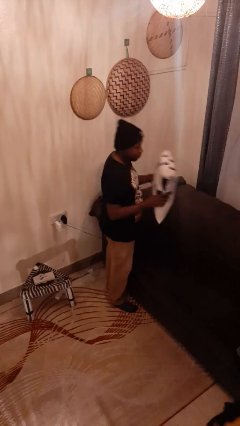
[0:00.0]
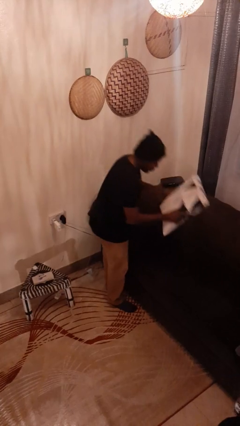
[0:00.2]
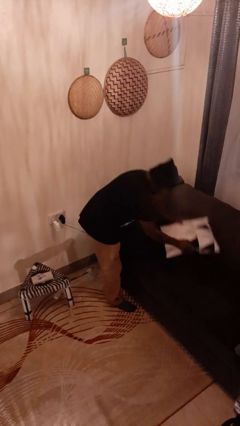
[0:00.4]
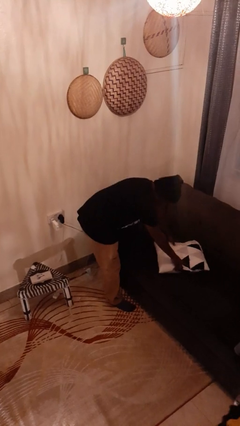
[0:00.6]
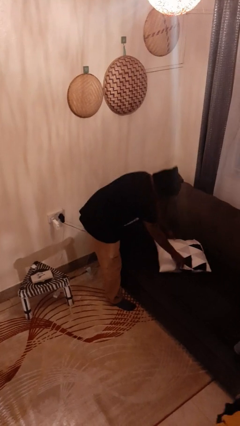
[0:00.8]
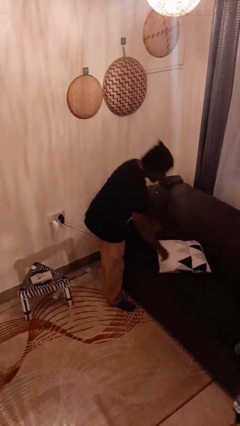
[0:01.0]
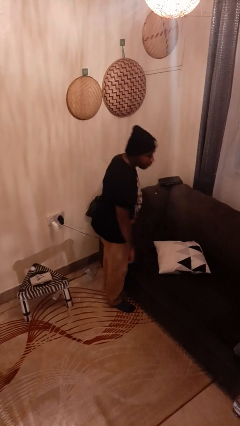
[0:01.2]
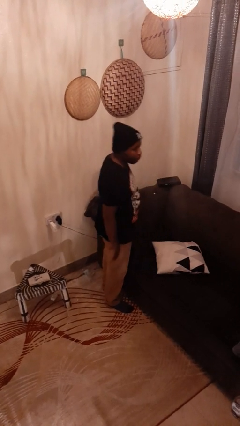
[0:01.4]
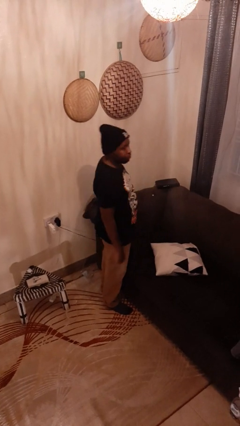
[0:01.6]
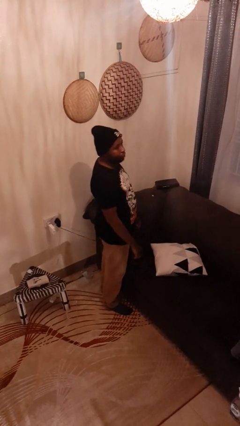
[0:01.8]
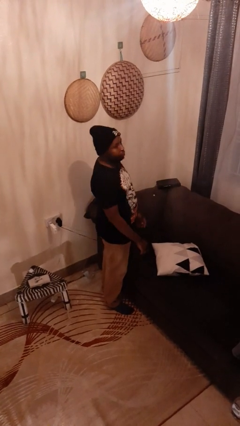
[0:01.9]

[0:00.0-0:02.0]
person puts down object on couch

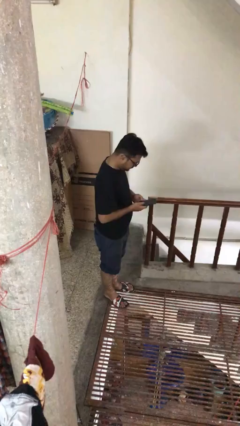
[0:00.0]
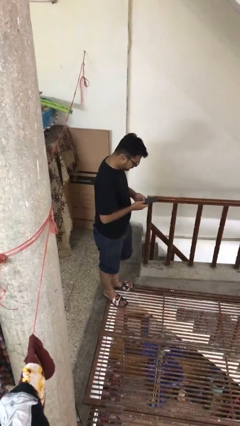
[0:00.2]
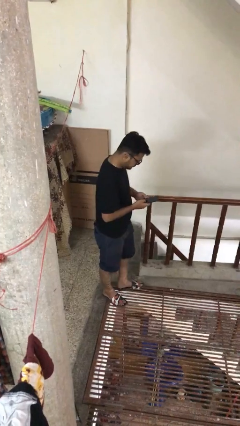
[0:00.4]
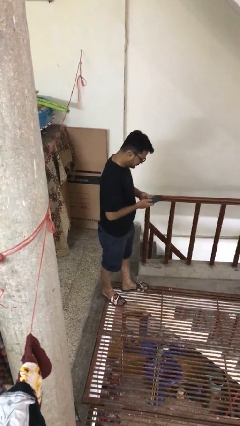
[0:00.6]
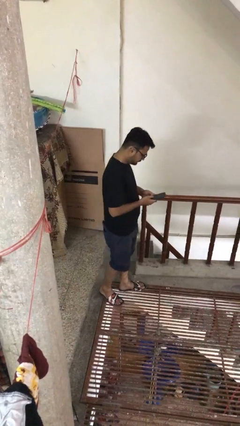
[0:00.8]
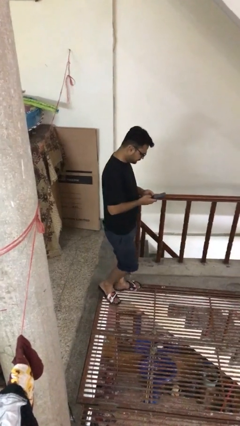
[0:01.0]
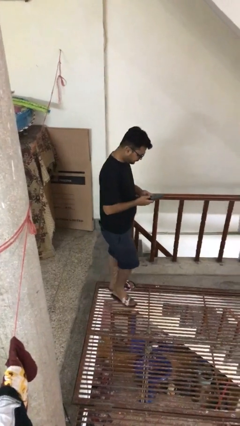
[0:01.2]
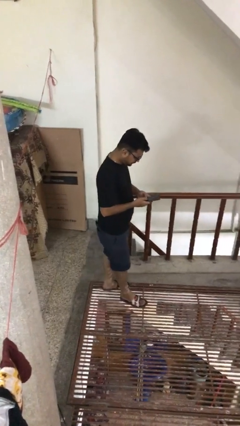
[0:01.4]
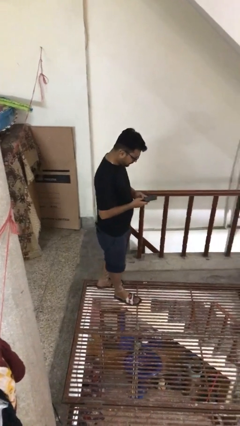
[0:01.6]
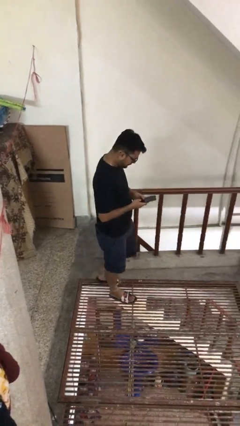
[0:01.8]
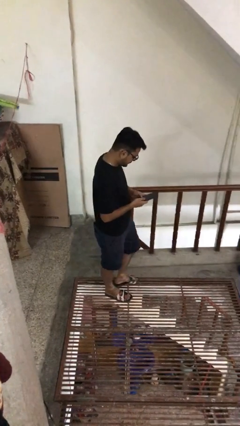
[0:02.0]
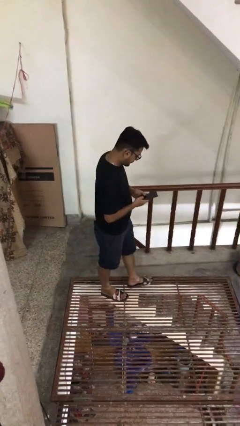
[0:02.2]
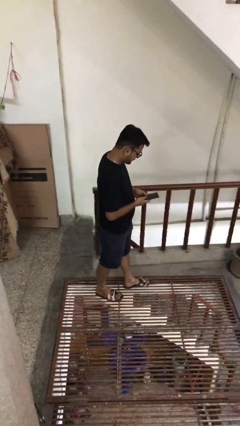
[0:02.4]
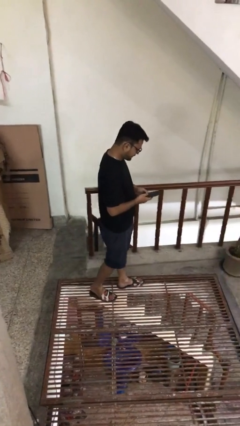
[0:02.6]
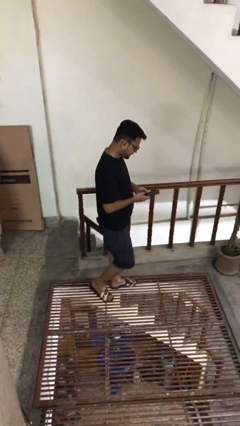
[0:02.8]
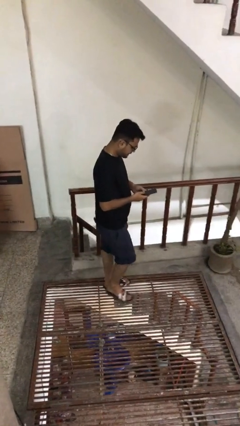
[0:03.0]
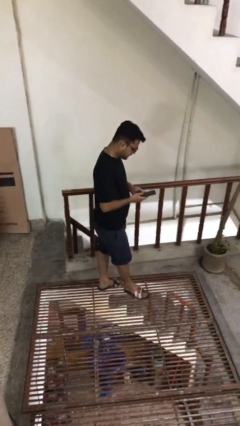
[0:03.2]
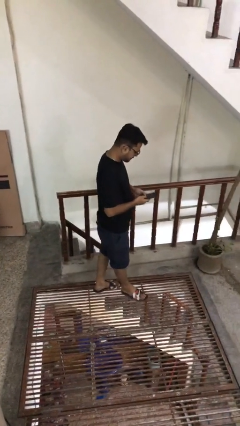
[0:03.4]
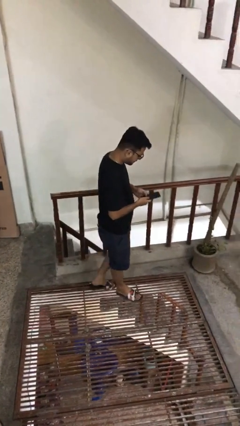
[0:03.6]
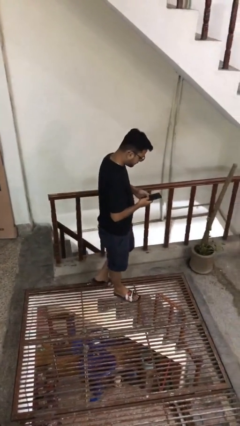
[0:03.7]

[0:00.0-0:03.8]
person texts on phone

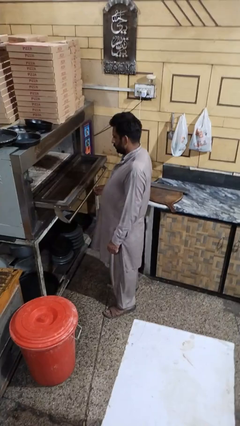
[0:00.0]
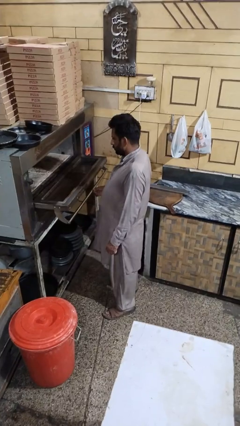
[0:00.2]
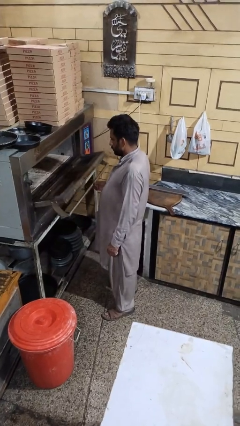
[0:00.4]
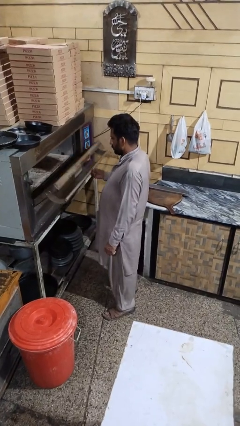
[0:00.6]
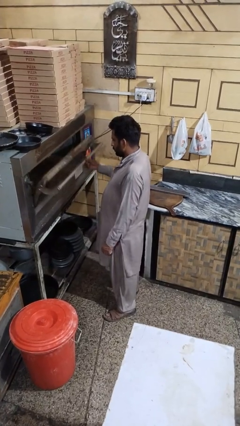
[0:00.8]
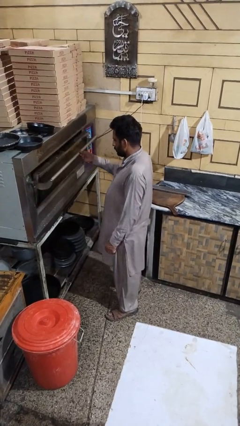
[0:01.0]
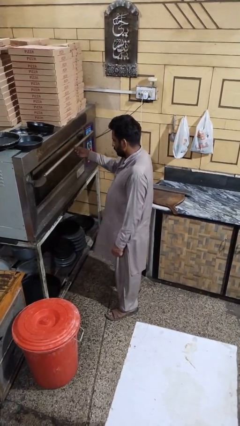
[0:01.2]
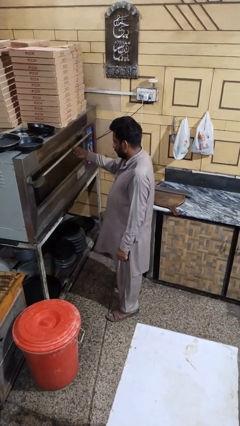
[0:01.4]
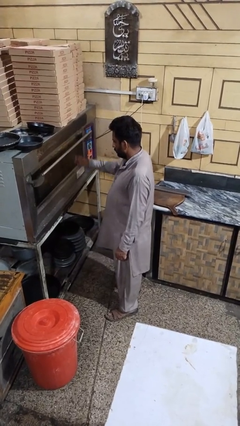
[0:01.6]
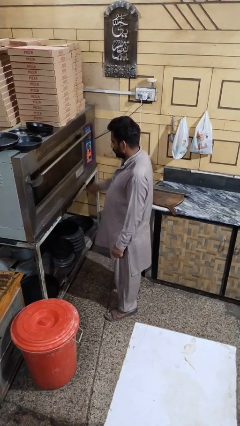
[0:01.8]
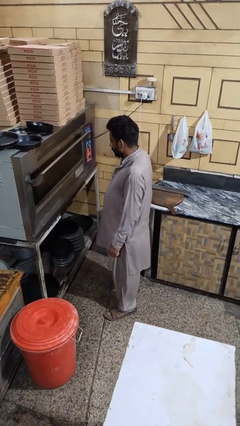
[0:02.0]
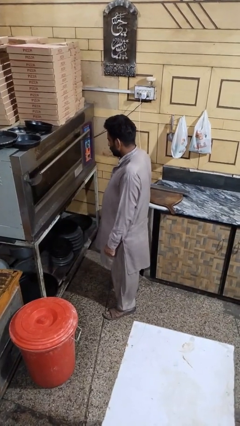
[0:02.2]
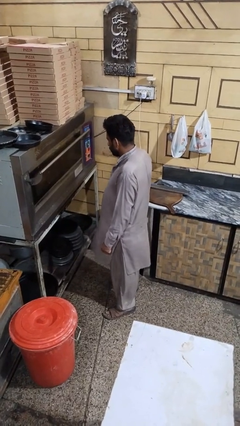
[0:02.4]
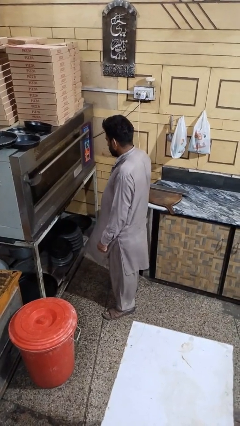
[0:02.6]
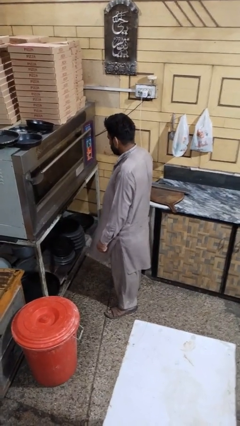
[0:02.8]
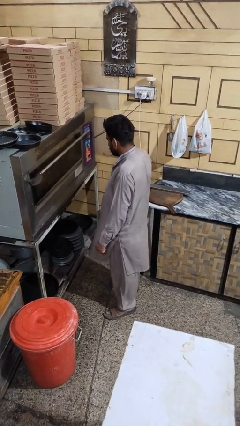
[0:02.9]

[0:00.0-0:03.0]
person closes microwave

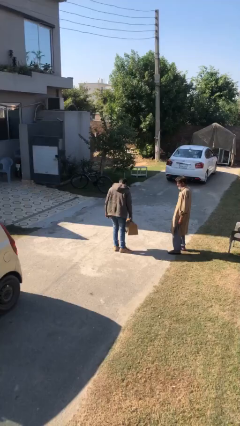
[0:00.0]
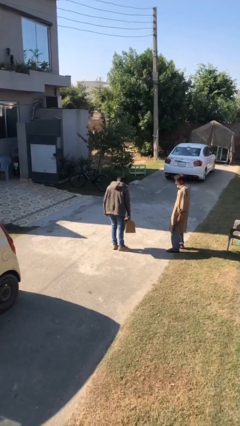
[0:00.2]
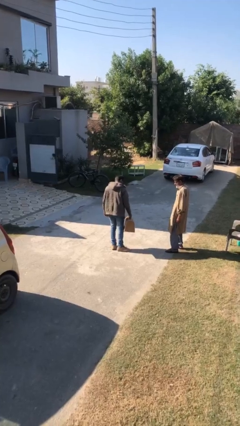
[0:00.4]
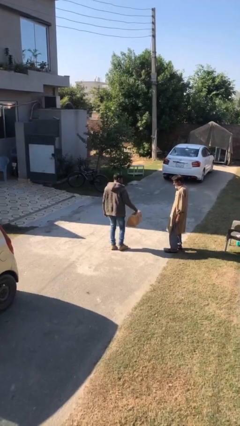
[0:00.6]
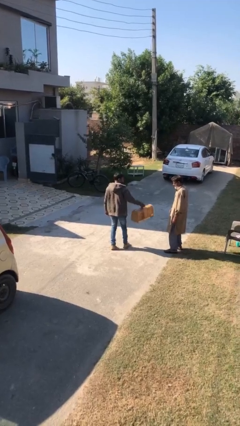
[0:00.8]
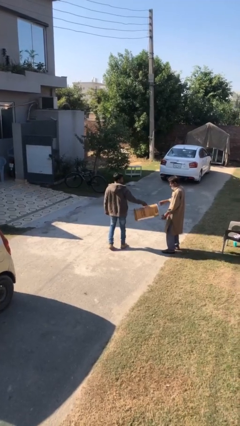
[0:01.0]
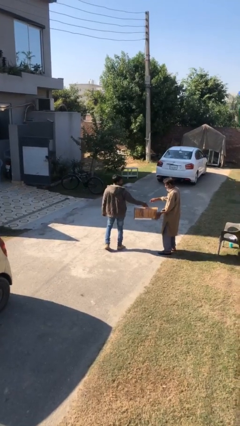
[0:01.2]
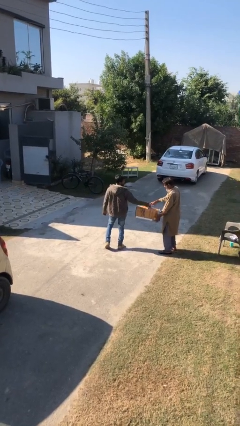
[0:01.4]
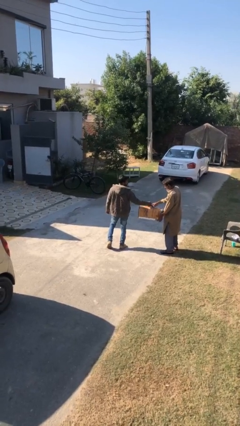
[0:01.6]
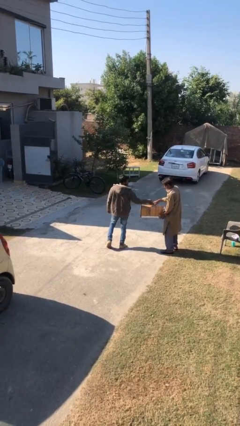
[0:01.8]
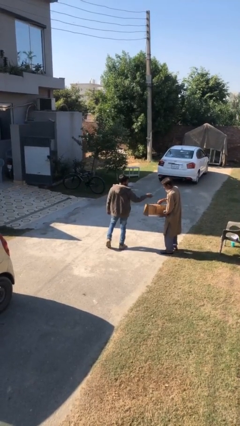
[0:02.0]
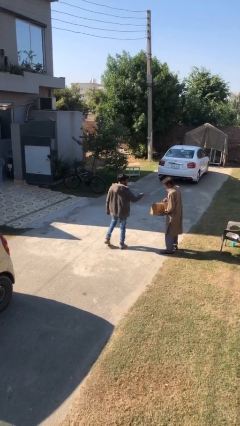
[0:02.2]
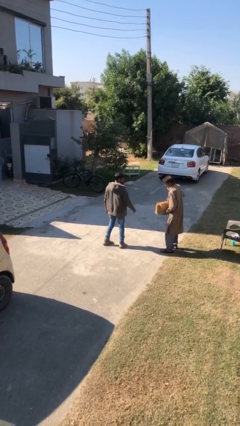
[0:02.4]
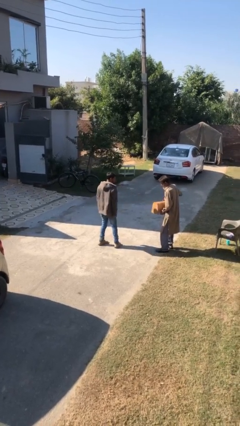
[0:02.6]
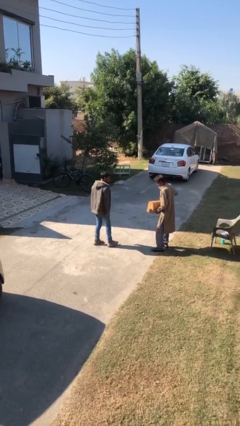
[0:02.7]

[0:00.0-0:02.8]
person transfers object to person

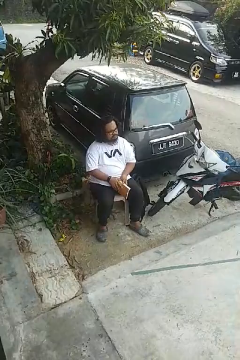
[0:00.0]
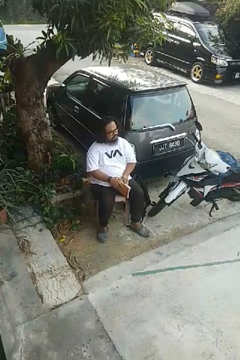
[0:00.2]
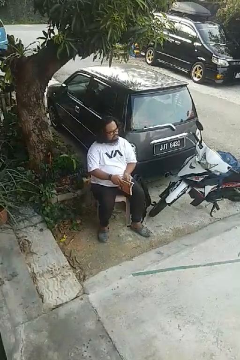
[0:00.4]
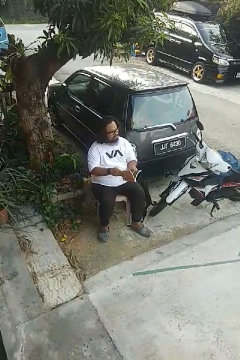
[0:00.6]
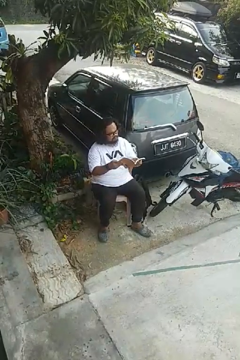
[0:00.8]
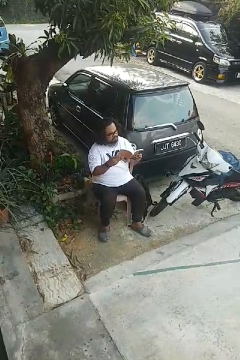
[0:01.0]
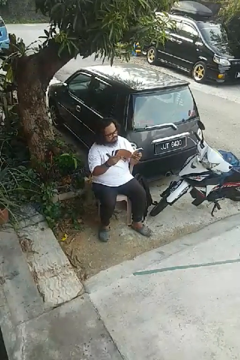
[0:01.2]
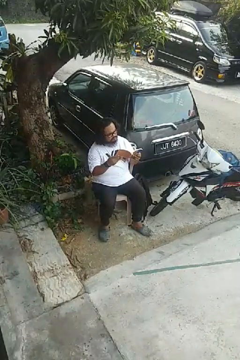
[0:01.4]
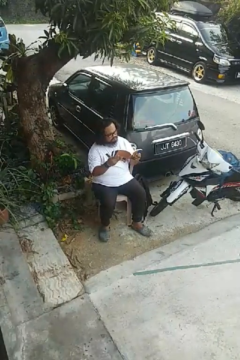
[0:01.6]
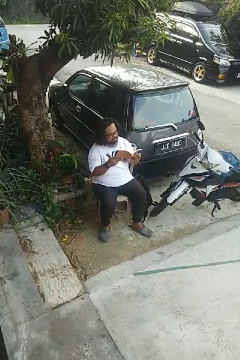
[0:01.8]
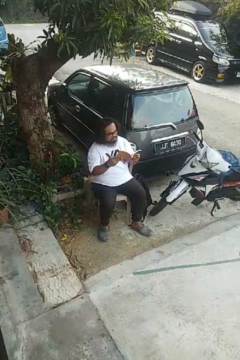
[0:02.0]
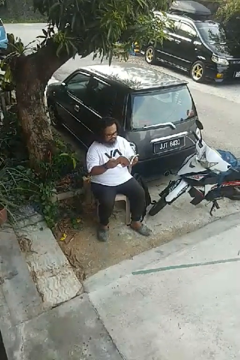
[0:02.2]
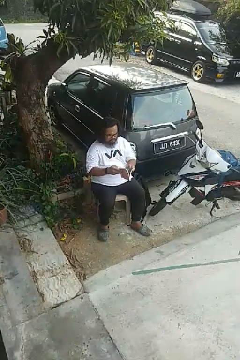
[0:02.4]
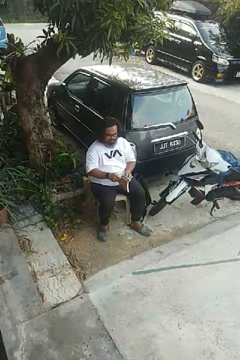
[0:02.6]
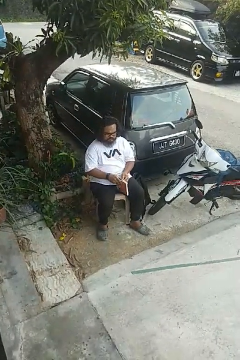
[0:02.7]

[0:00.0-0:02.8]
person reads book

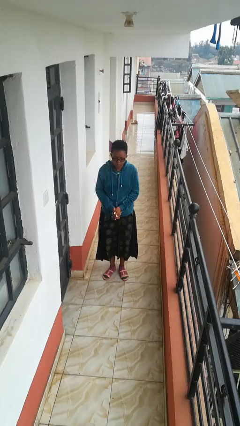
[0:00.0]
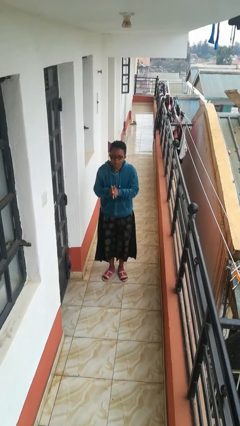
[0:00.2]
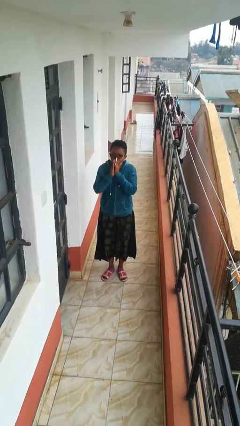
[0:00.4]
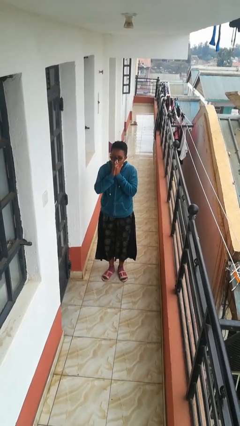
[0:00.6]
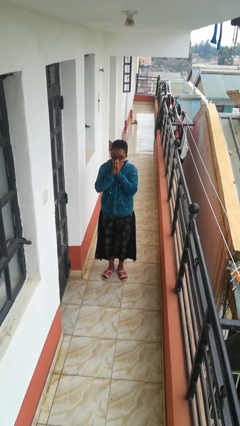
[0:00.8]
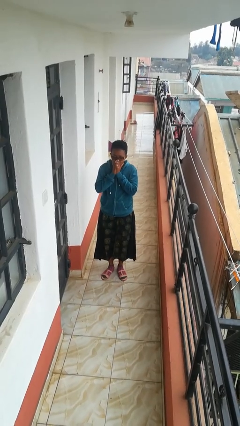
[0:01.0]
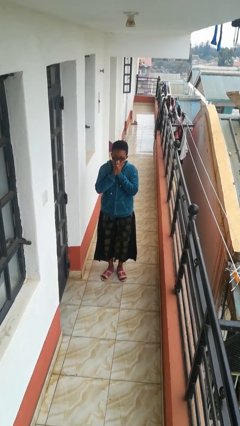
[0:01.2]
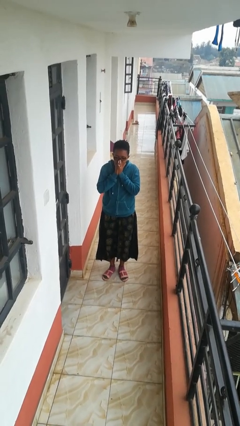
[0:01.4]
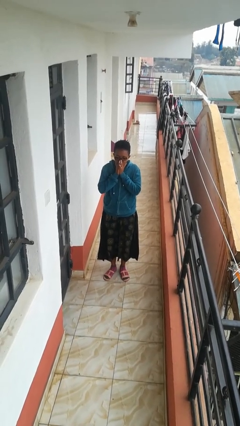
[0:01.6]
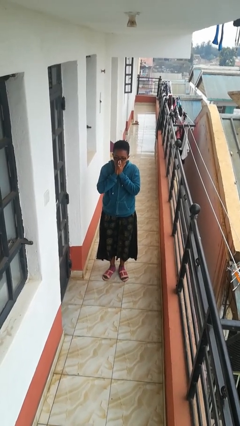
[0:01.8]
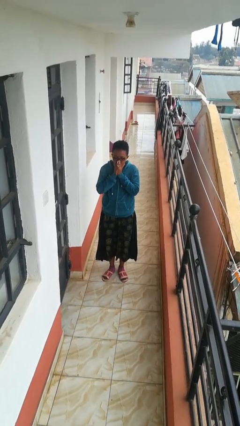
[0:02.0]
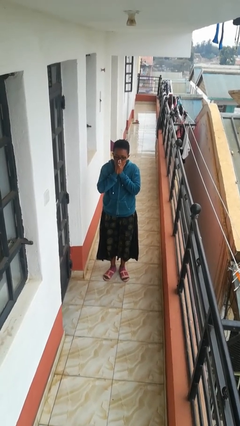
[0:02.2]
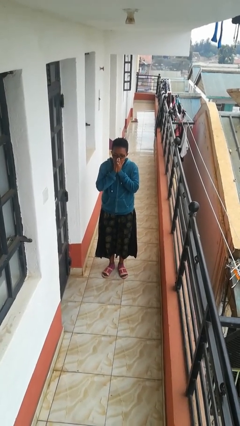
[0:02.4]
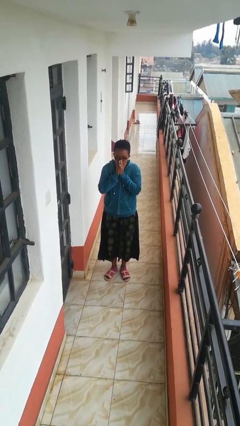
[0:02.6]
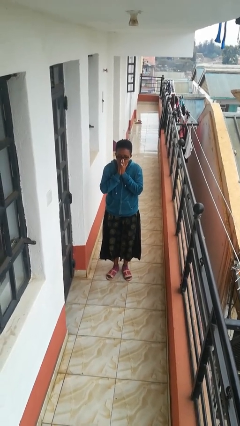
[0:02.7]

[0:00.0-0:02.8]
person blows into hands

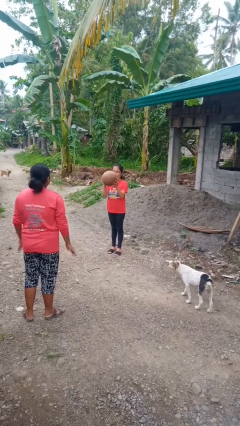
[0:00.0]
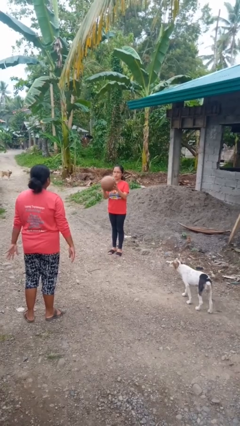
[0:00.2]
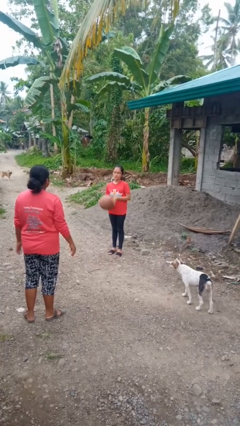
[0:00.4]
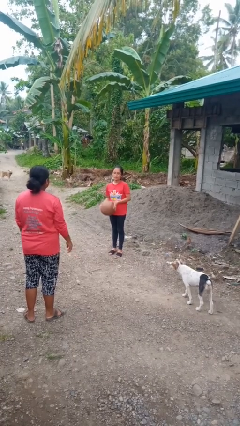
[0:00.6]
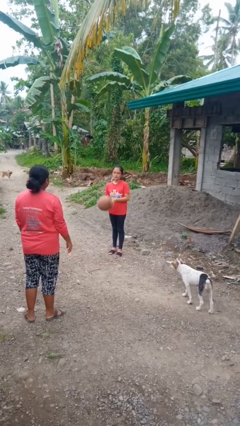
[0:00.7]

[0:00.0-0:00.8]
person catches object from person
